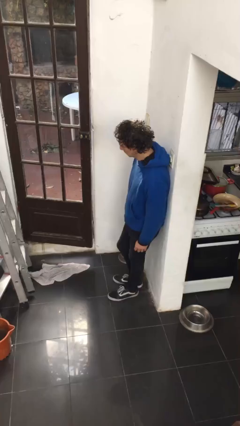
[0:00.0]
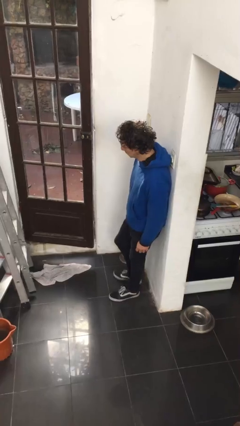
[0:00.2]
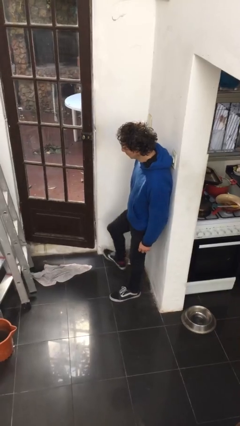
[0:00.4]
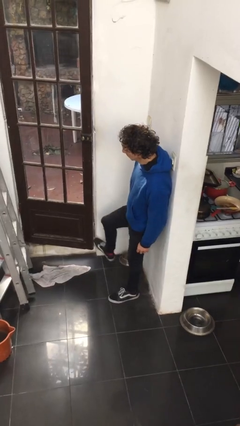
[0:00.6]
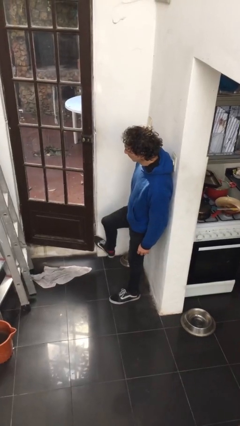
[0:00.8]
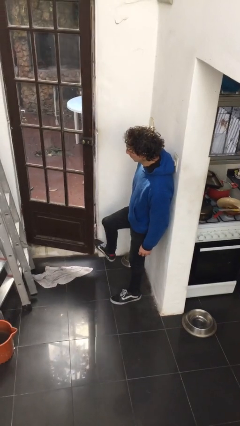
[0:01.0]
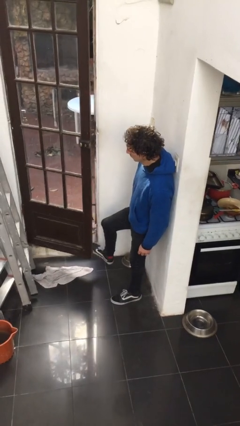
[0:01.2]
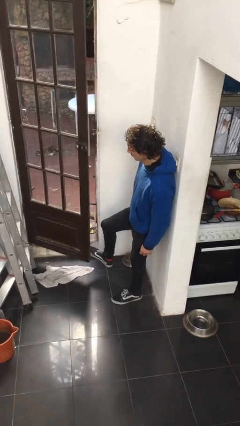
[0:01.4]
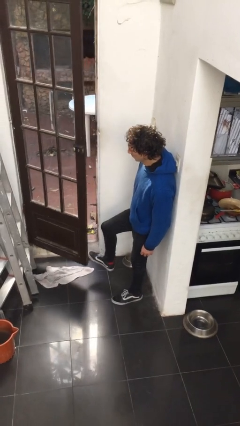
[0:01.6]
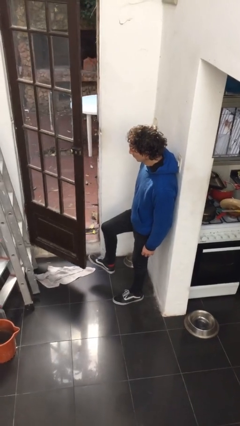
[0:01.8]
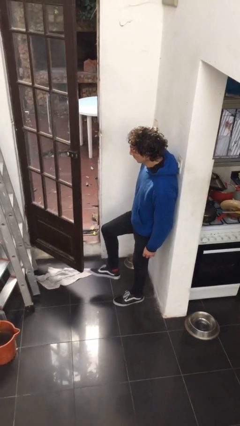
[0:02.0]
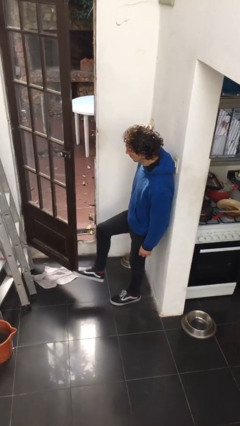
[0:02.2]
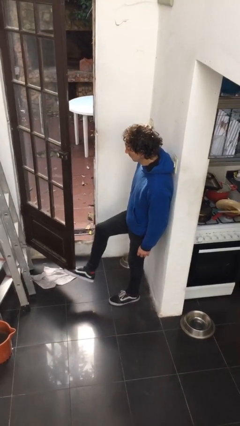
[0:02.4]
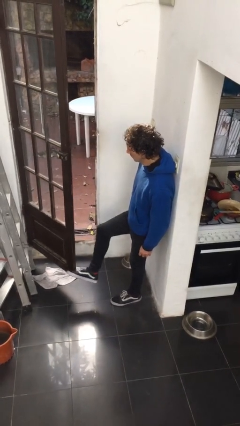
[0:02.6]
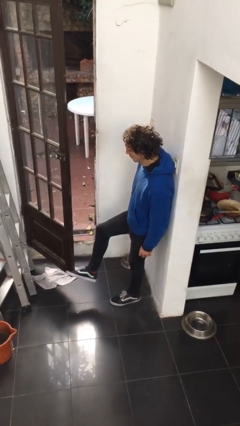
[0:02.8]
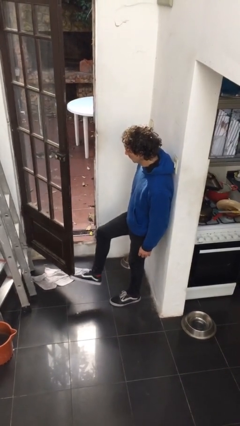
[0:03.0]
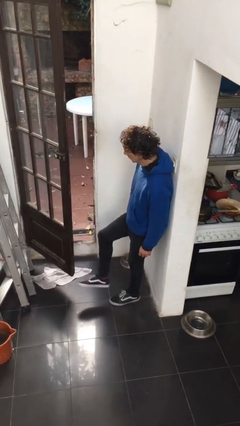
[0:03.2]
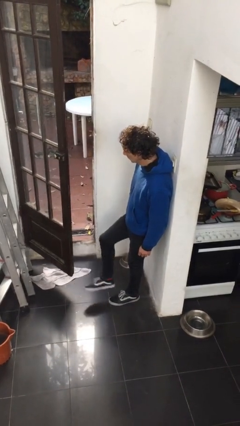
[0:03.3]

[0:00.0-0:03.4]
person opens facility door

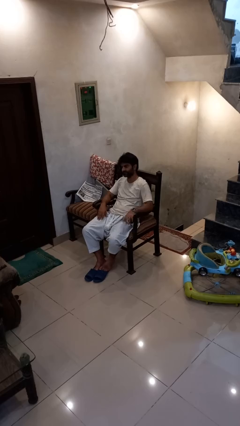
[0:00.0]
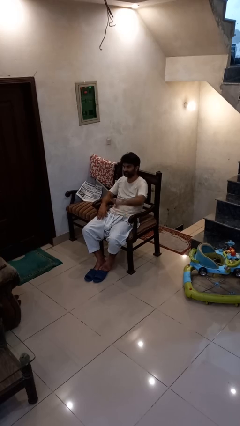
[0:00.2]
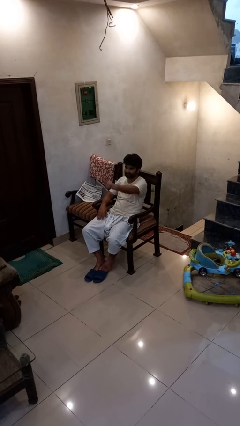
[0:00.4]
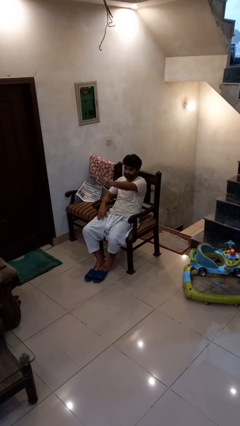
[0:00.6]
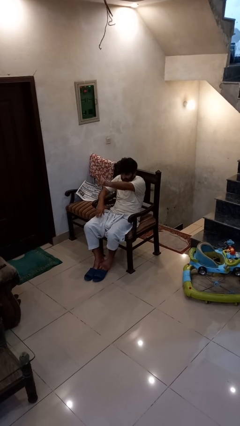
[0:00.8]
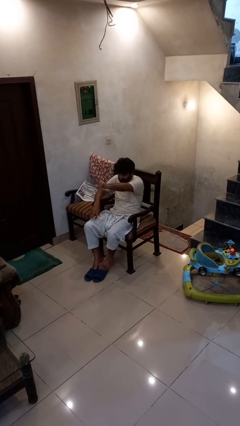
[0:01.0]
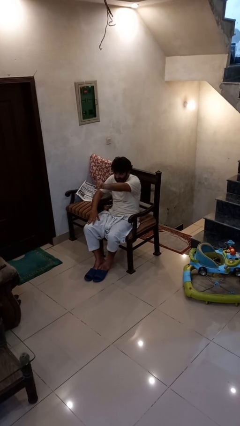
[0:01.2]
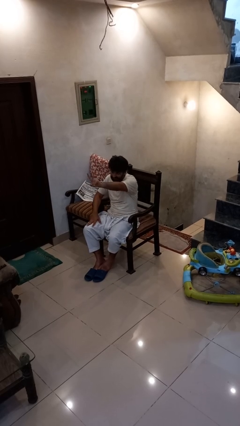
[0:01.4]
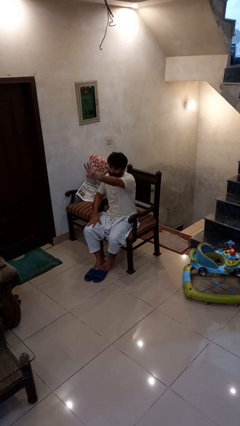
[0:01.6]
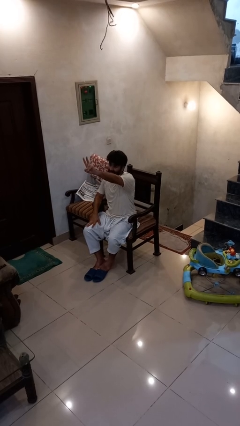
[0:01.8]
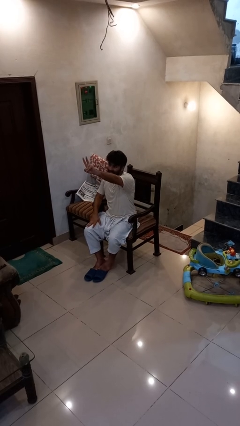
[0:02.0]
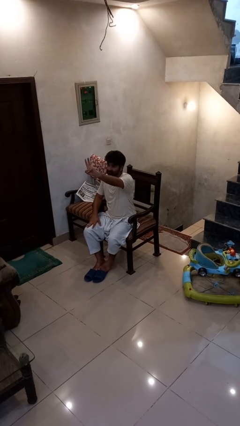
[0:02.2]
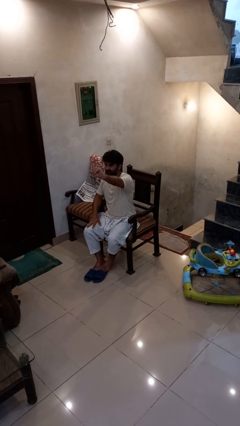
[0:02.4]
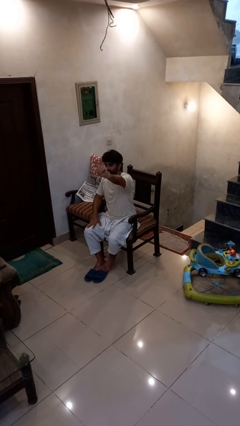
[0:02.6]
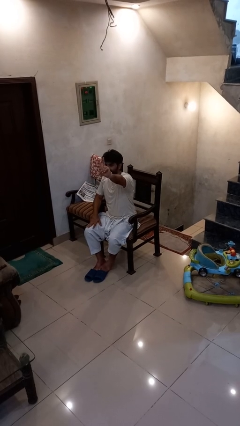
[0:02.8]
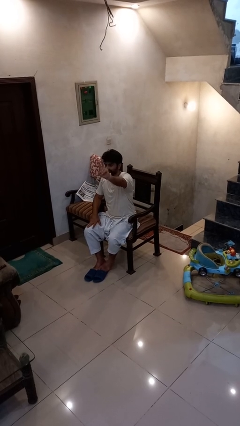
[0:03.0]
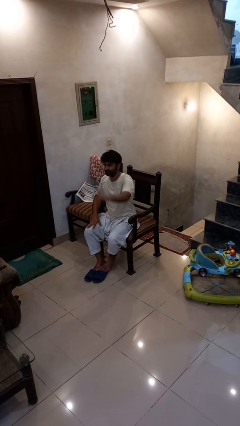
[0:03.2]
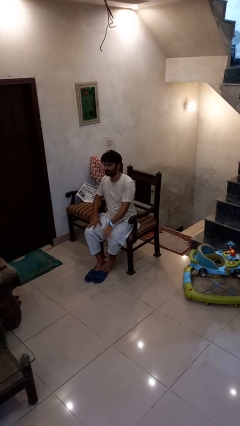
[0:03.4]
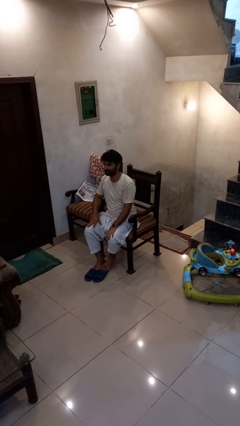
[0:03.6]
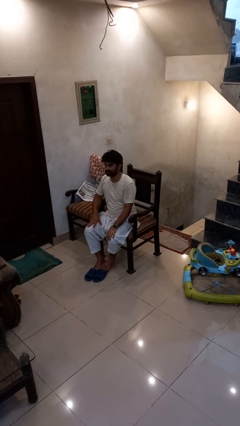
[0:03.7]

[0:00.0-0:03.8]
person gestures peace

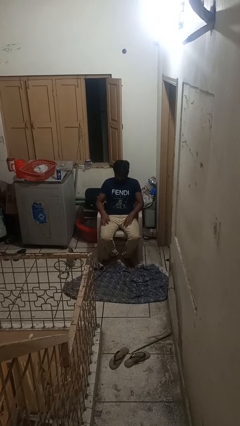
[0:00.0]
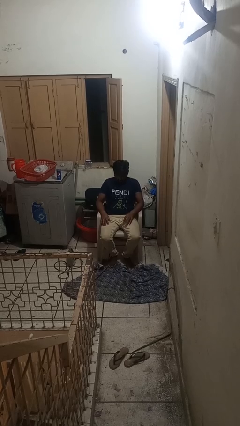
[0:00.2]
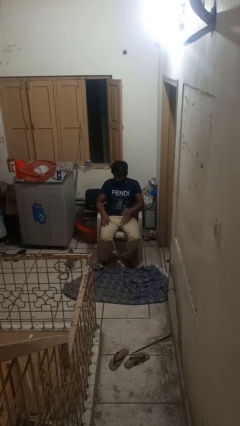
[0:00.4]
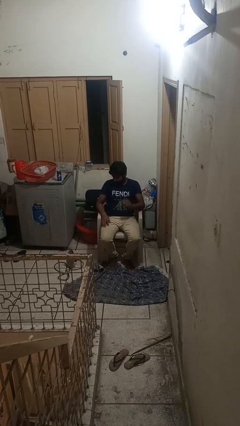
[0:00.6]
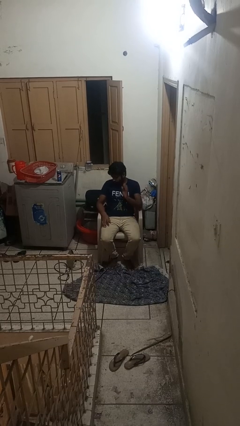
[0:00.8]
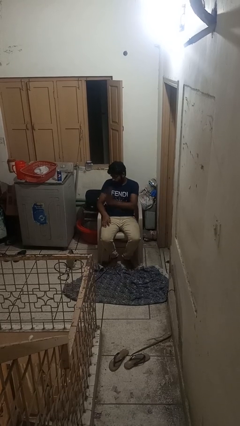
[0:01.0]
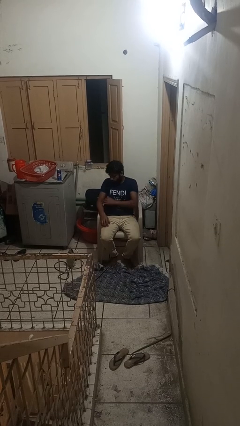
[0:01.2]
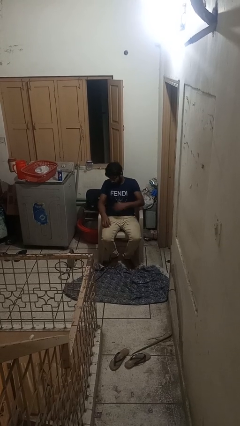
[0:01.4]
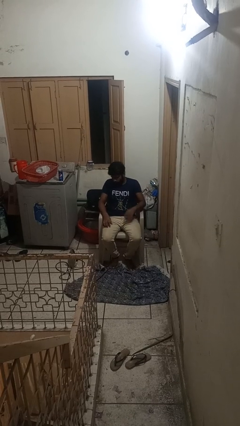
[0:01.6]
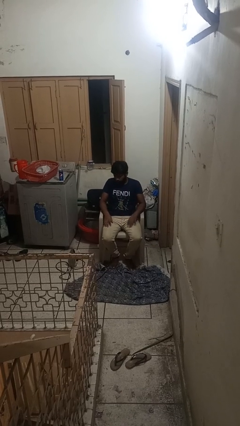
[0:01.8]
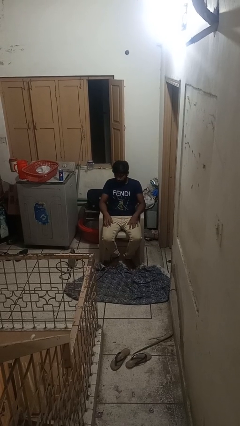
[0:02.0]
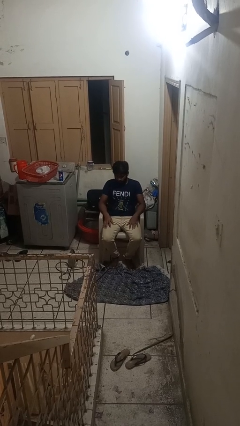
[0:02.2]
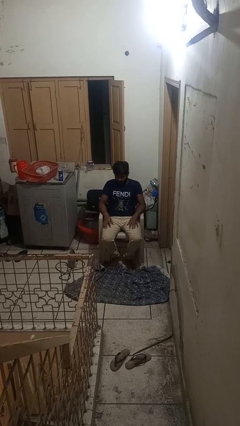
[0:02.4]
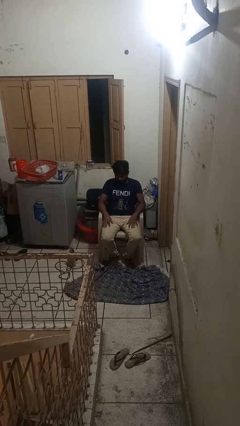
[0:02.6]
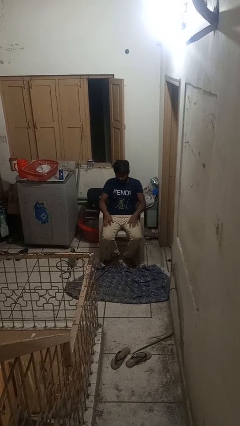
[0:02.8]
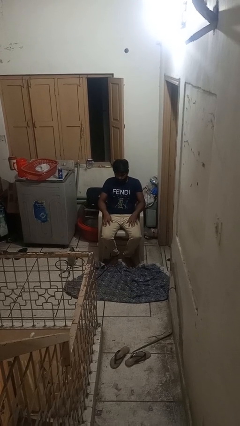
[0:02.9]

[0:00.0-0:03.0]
person swats bug

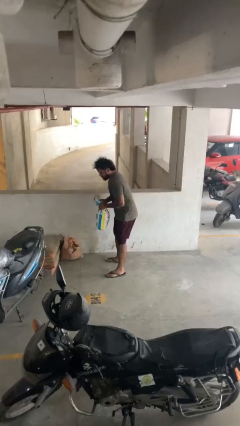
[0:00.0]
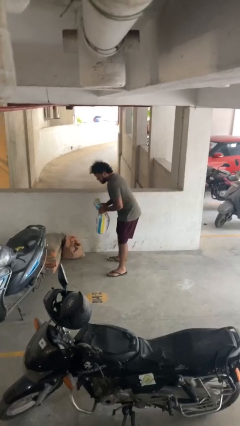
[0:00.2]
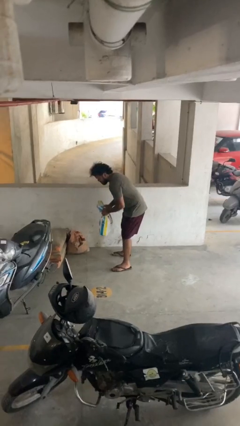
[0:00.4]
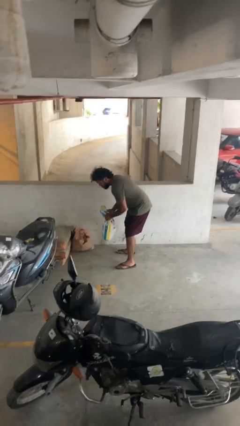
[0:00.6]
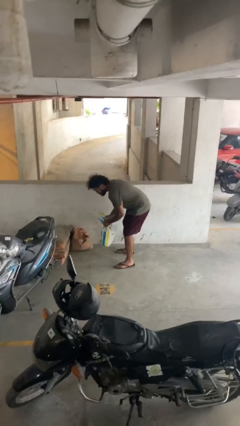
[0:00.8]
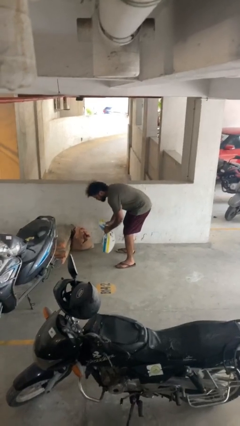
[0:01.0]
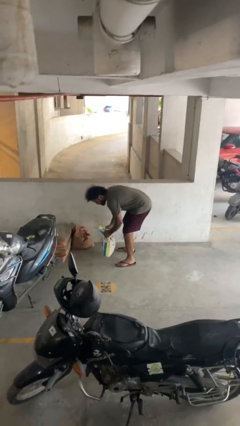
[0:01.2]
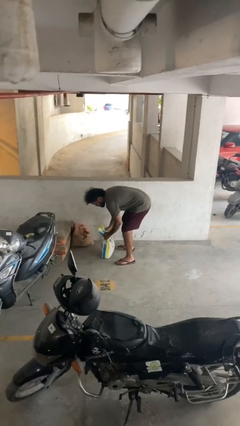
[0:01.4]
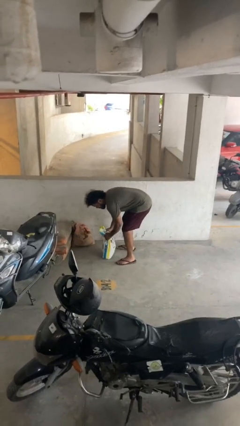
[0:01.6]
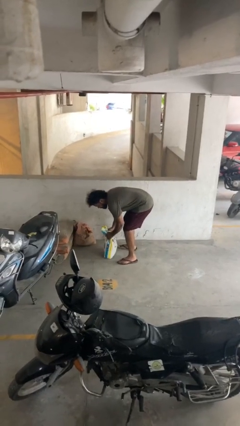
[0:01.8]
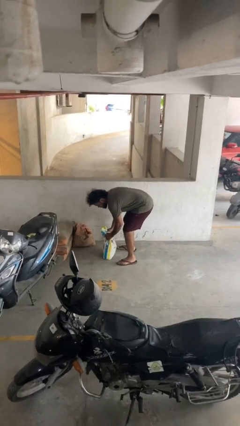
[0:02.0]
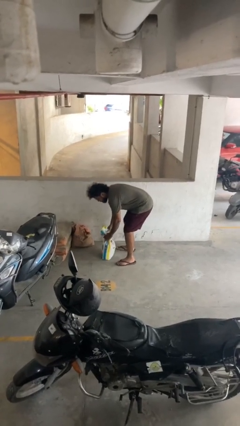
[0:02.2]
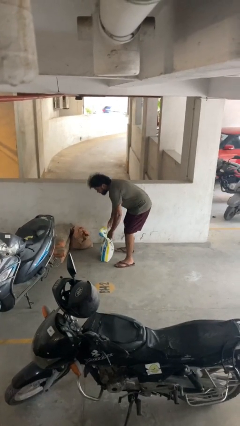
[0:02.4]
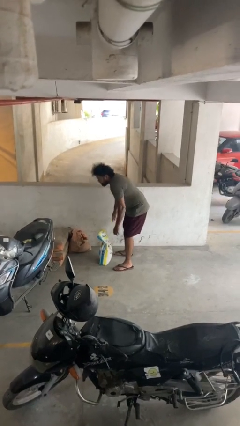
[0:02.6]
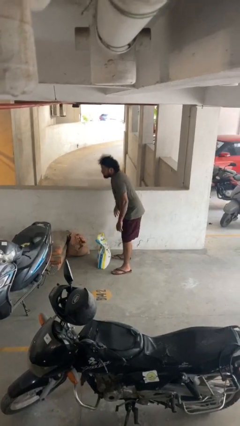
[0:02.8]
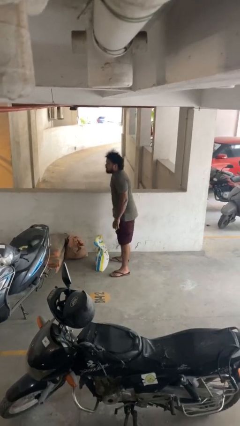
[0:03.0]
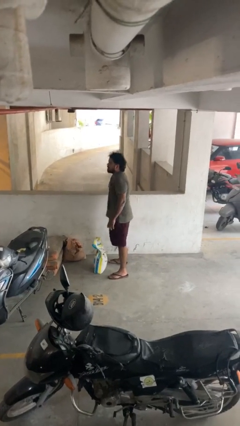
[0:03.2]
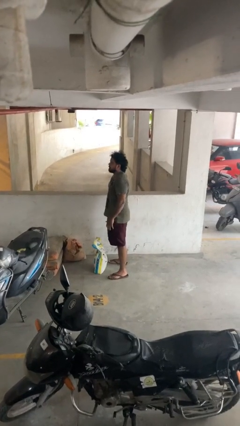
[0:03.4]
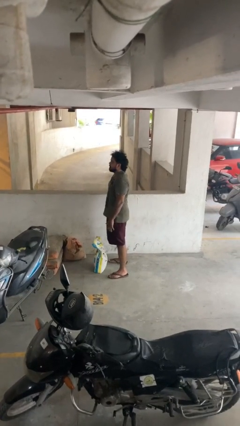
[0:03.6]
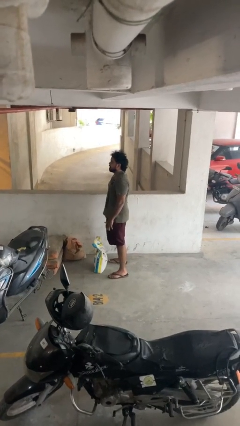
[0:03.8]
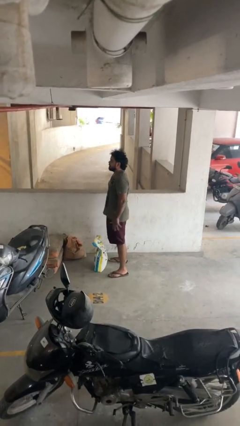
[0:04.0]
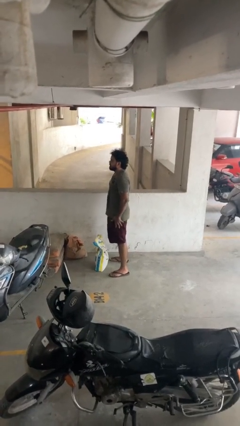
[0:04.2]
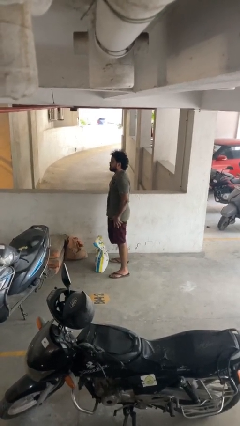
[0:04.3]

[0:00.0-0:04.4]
person puts down object on floor

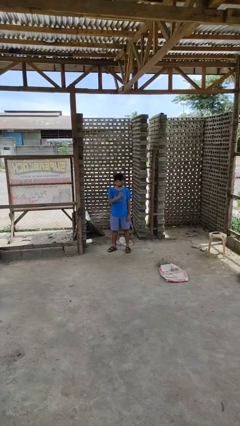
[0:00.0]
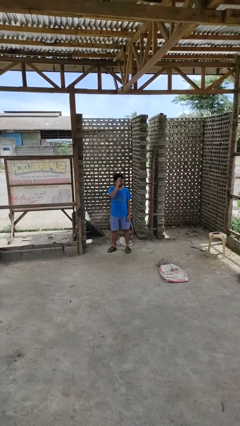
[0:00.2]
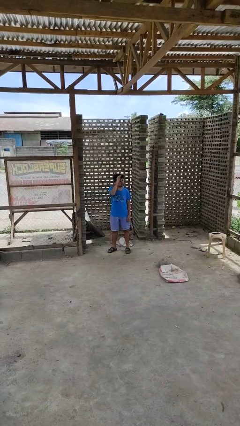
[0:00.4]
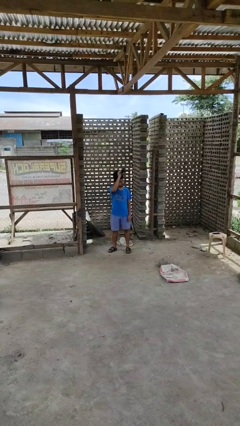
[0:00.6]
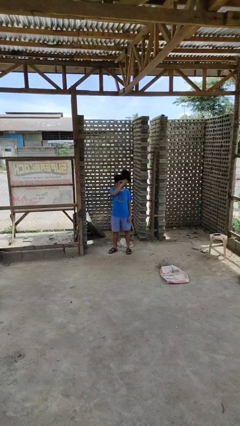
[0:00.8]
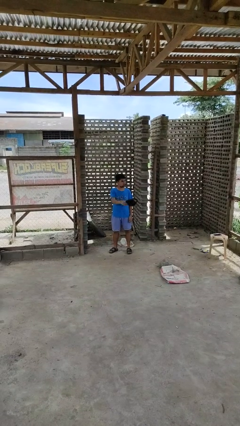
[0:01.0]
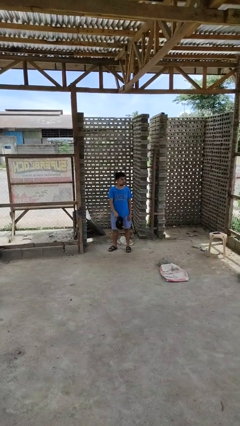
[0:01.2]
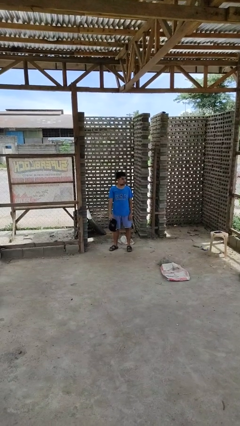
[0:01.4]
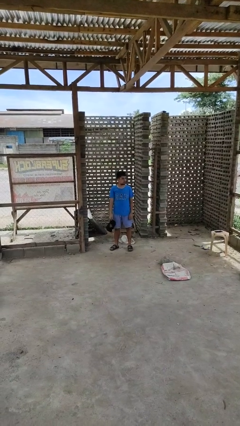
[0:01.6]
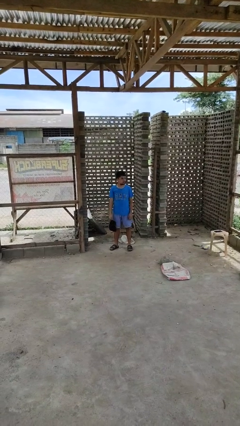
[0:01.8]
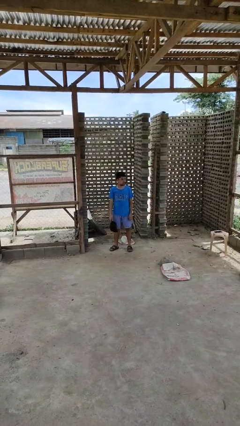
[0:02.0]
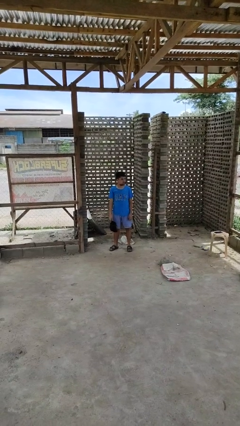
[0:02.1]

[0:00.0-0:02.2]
person takes off hat

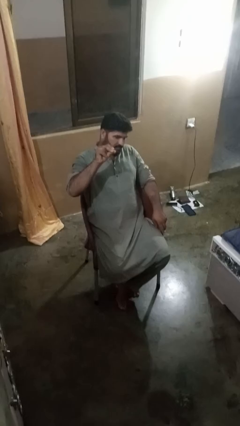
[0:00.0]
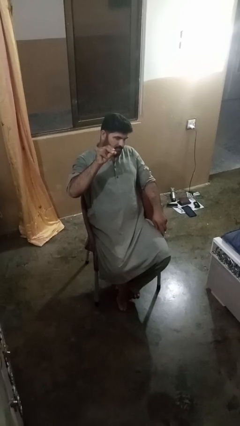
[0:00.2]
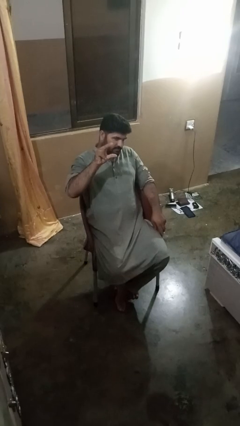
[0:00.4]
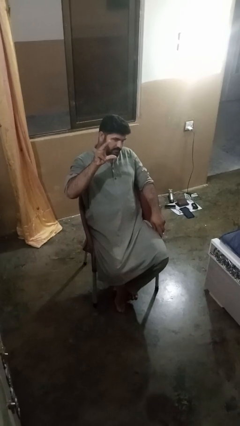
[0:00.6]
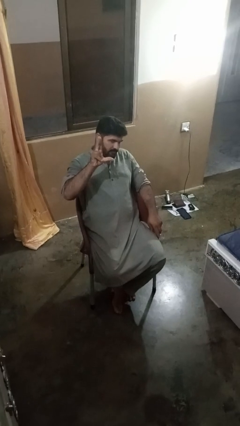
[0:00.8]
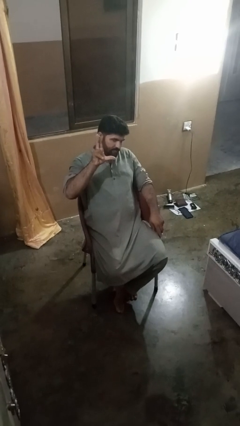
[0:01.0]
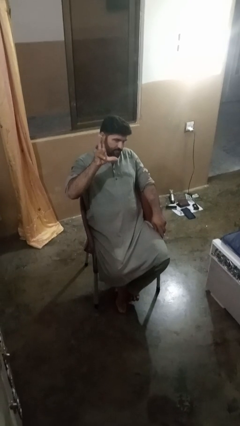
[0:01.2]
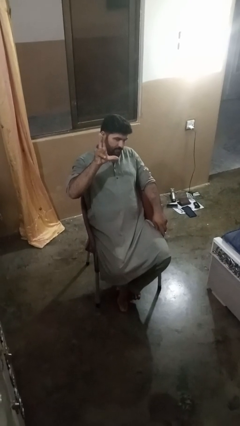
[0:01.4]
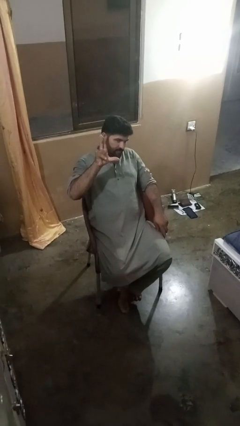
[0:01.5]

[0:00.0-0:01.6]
person gestures zoom out
